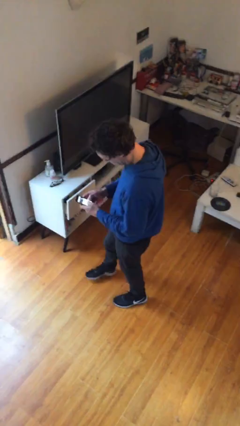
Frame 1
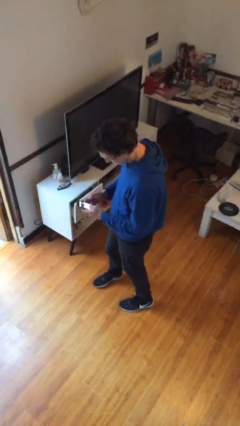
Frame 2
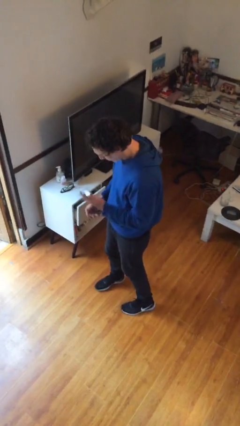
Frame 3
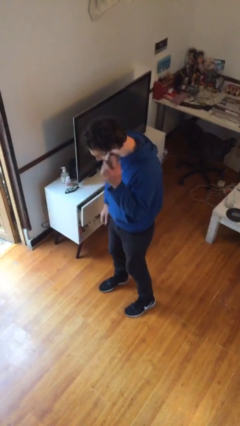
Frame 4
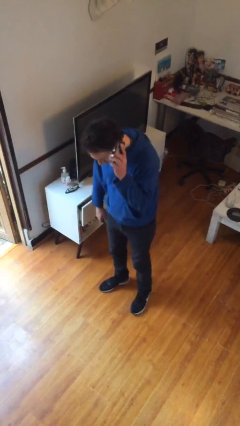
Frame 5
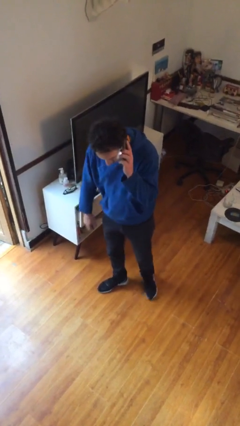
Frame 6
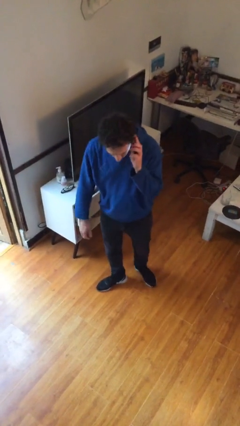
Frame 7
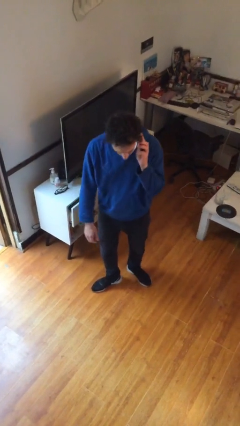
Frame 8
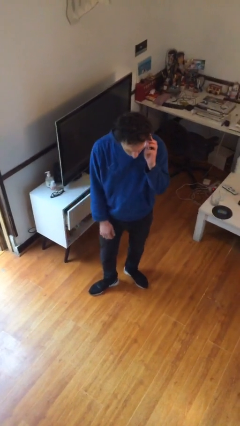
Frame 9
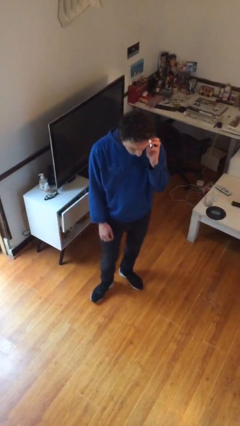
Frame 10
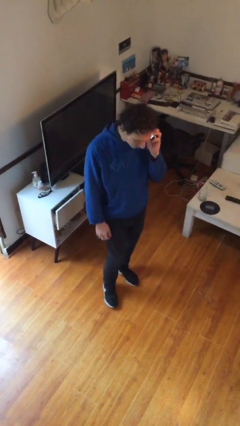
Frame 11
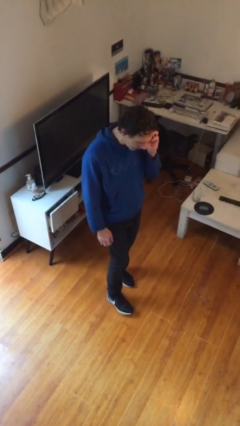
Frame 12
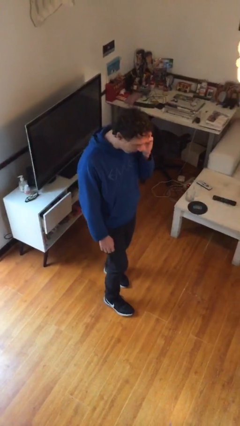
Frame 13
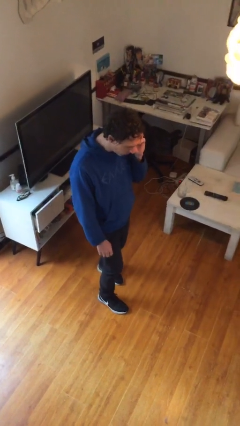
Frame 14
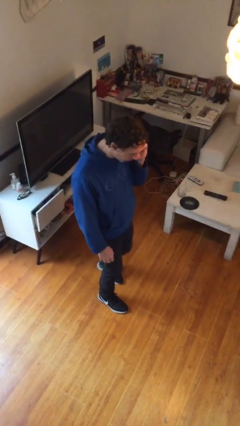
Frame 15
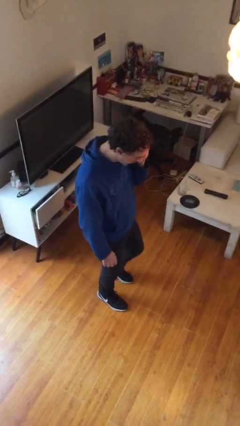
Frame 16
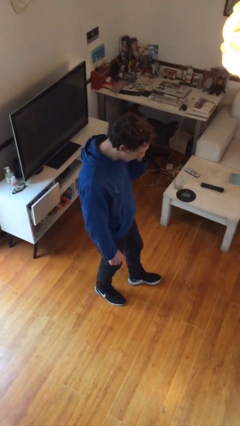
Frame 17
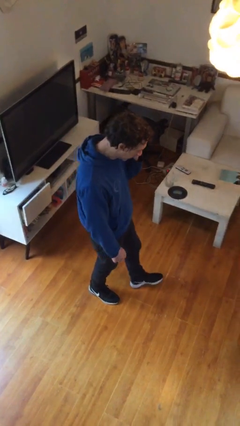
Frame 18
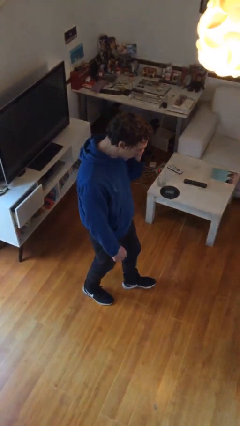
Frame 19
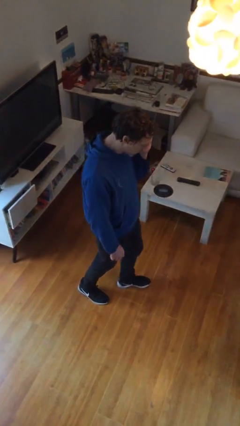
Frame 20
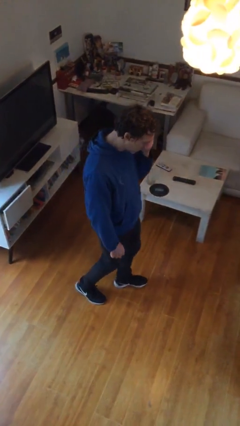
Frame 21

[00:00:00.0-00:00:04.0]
person talks on phone

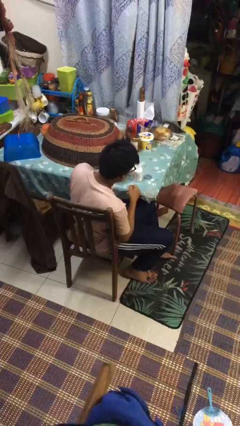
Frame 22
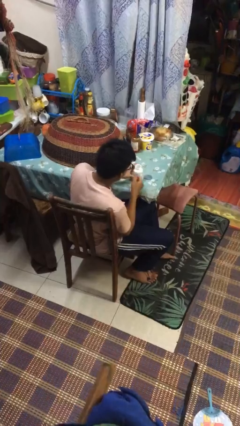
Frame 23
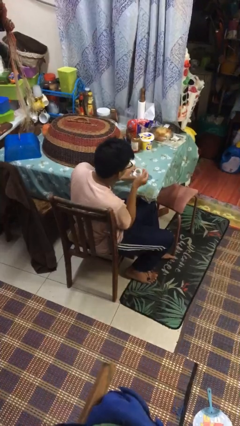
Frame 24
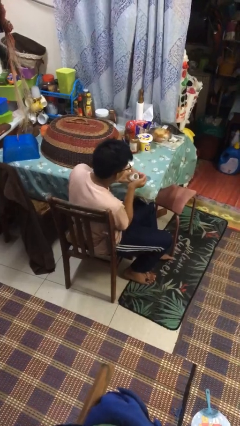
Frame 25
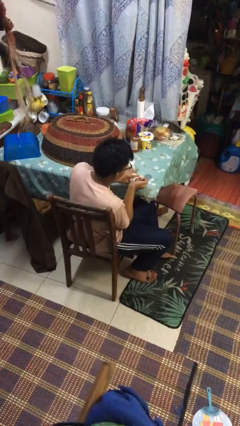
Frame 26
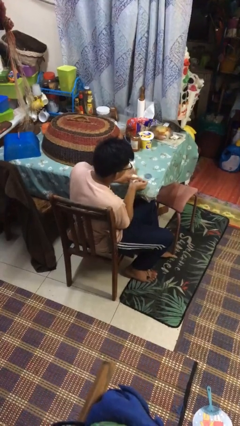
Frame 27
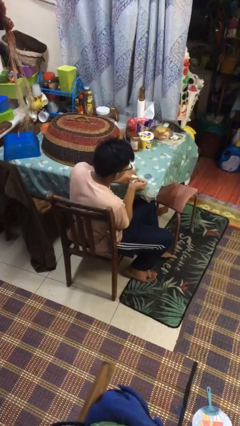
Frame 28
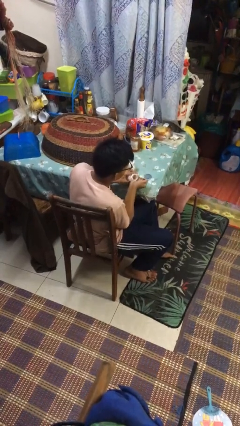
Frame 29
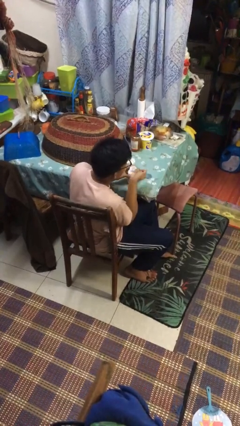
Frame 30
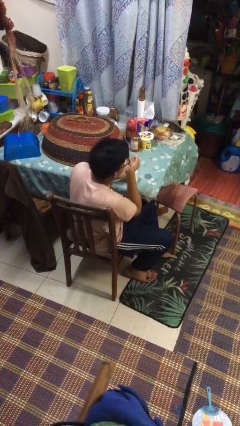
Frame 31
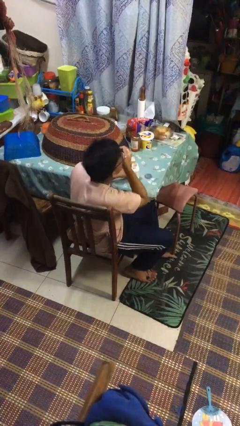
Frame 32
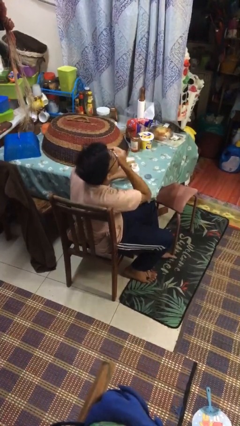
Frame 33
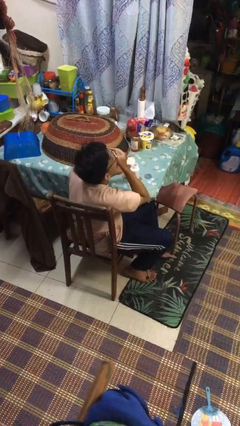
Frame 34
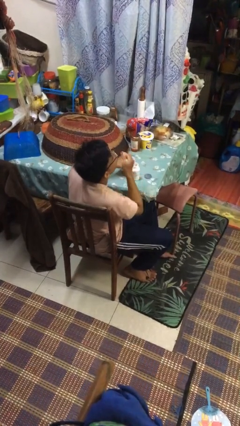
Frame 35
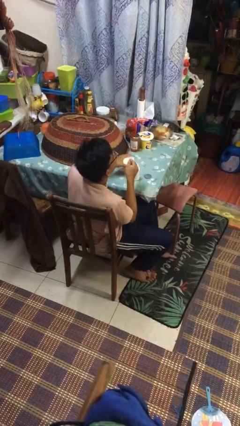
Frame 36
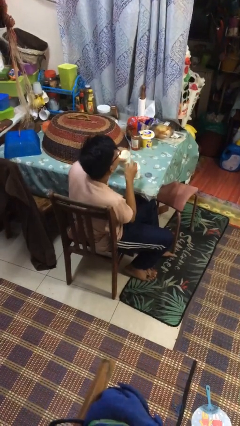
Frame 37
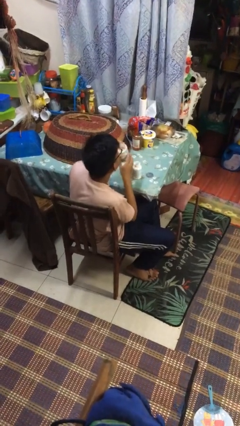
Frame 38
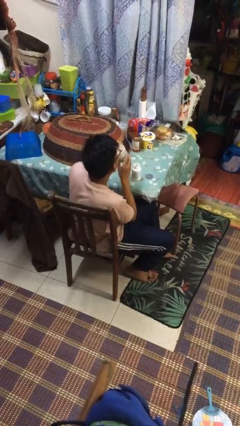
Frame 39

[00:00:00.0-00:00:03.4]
person takes medicine pills

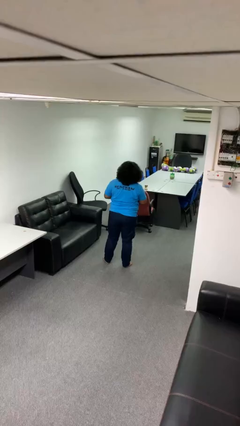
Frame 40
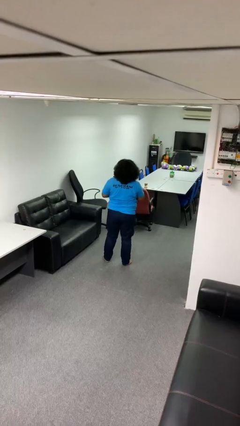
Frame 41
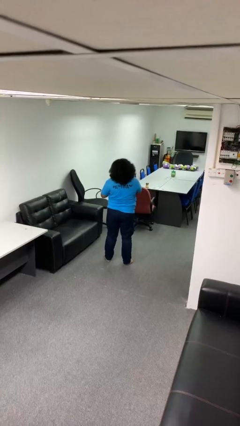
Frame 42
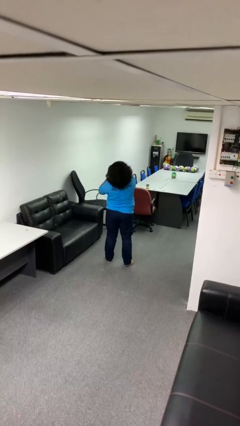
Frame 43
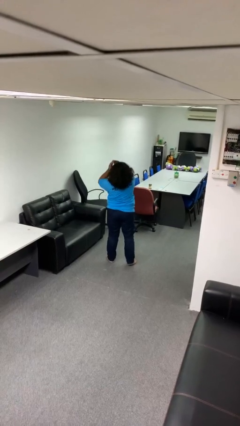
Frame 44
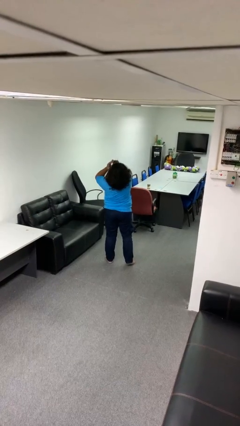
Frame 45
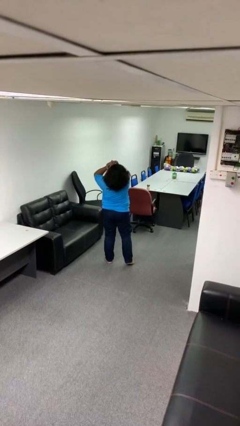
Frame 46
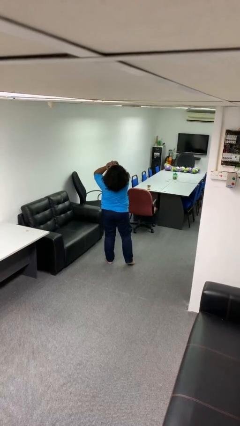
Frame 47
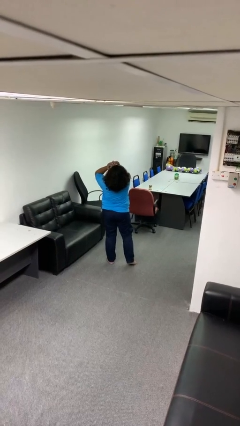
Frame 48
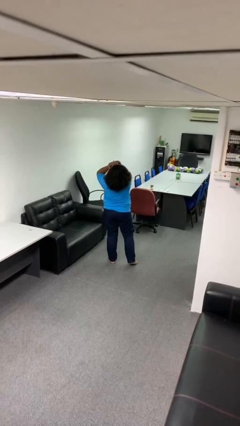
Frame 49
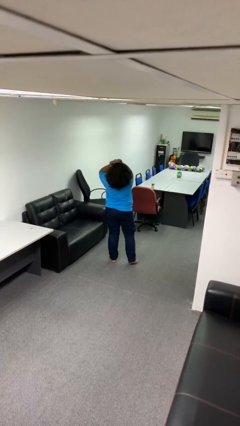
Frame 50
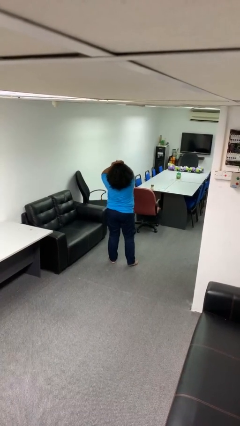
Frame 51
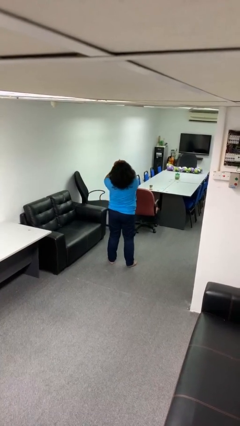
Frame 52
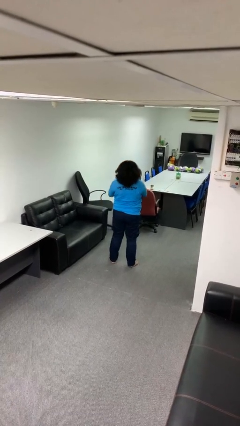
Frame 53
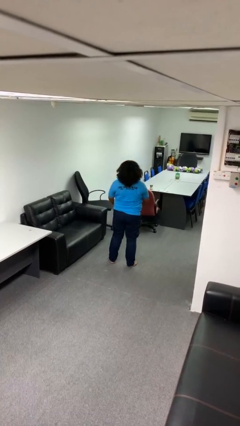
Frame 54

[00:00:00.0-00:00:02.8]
person covers face with hands

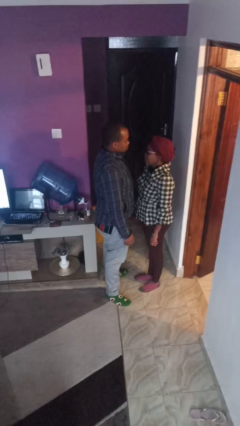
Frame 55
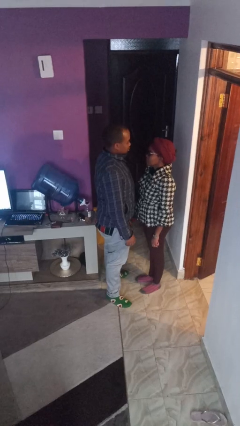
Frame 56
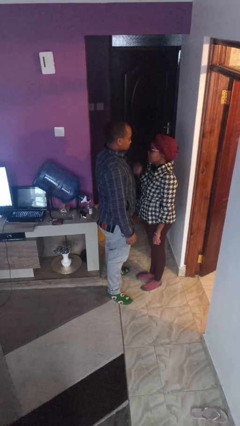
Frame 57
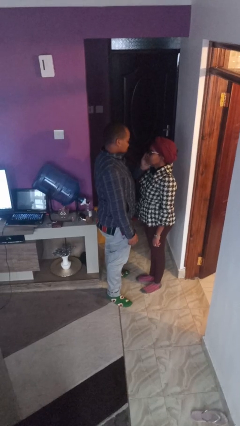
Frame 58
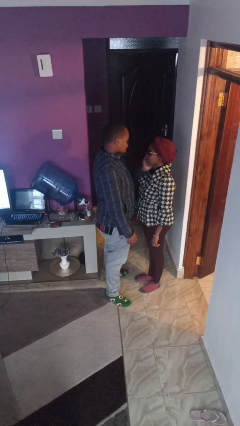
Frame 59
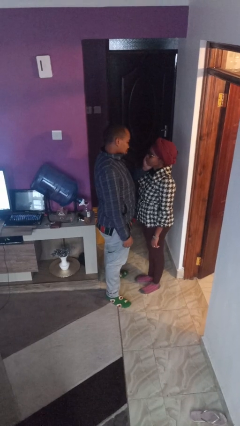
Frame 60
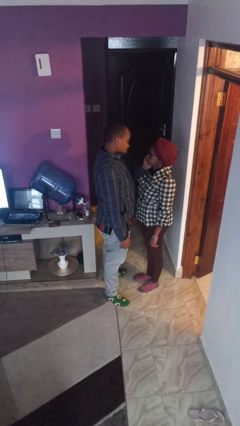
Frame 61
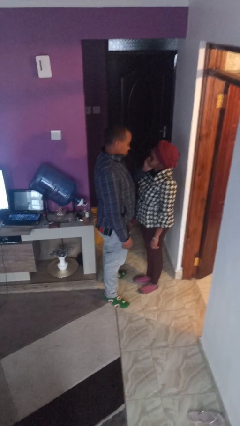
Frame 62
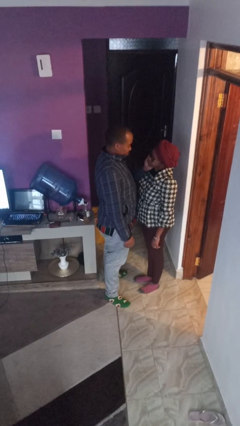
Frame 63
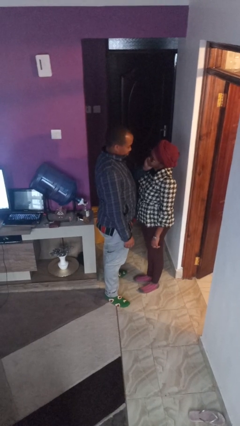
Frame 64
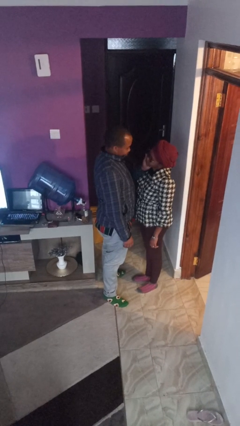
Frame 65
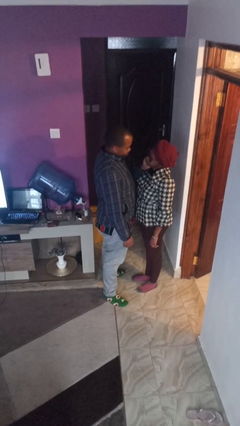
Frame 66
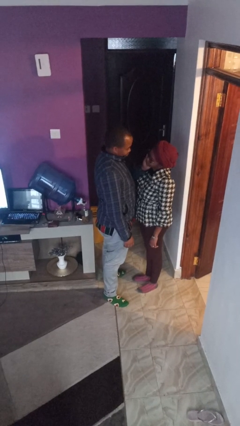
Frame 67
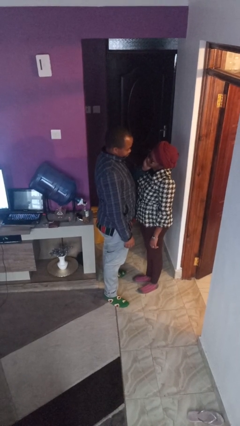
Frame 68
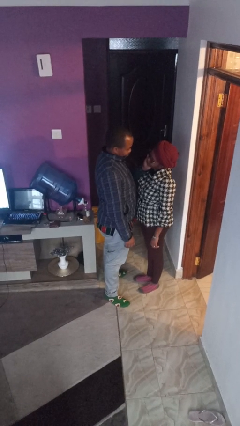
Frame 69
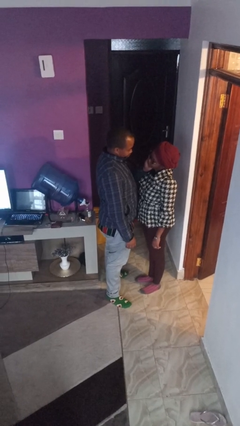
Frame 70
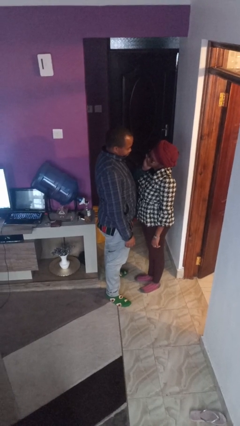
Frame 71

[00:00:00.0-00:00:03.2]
person touches face of person

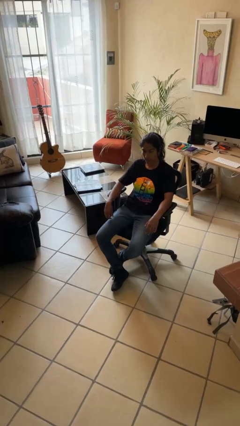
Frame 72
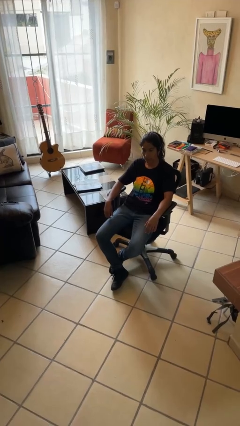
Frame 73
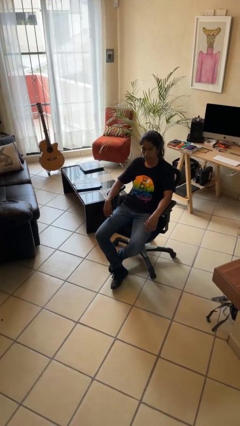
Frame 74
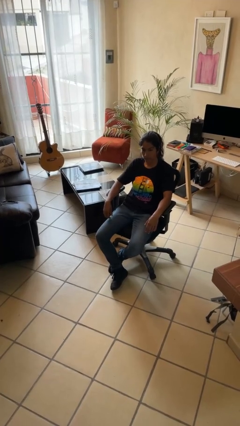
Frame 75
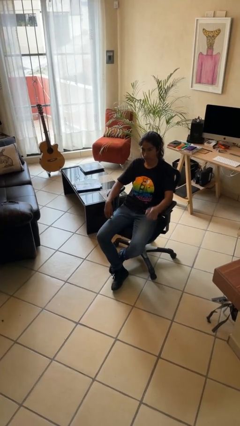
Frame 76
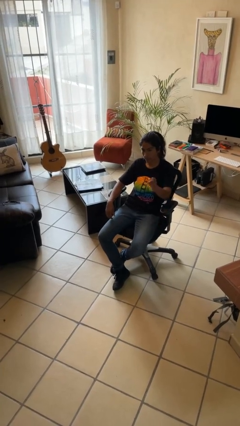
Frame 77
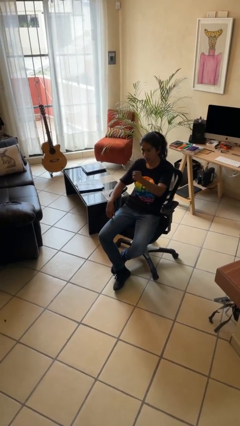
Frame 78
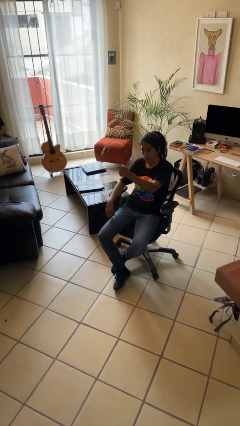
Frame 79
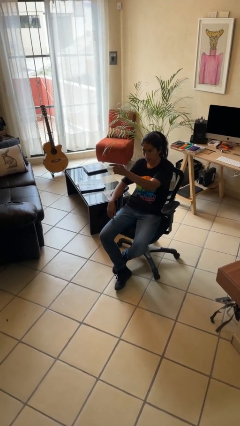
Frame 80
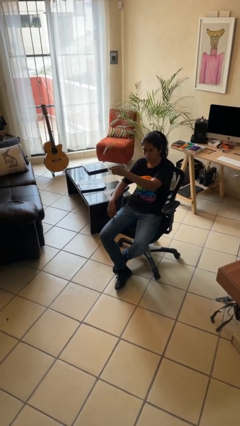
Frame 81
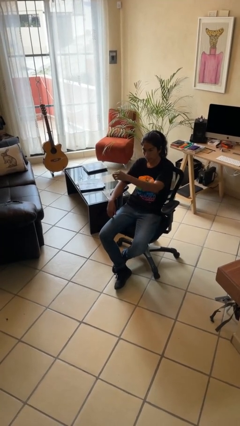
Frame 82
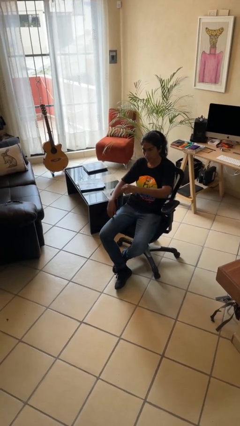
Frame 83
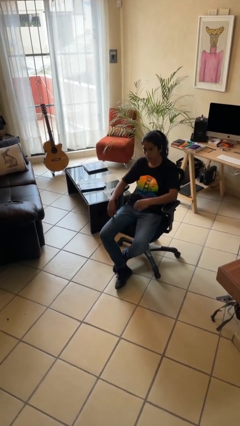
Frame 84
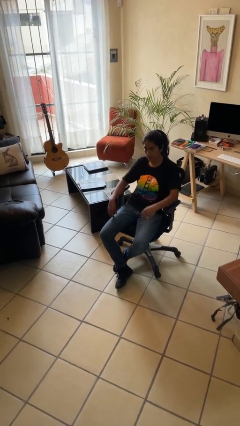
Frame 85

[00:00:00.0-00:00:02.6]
person gestures swipe right

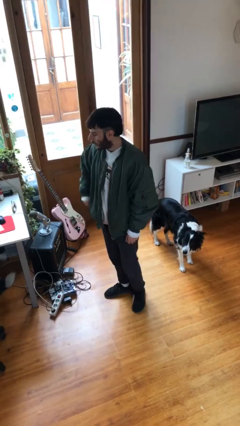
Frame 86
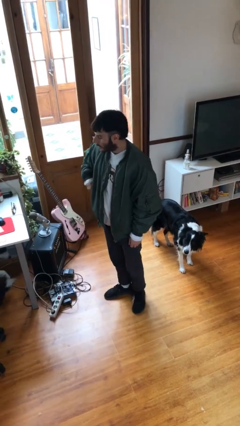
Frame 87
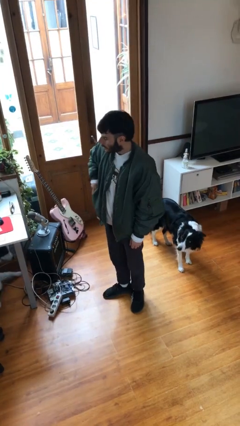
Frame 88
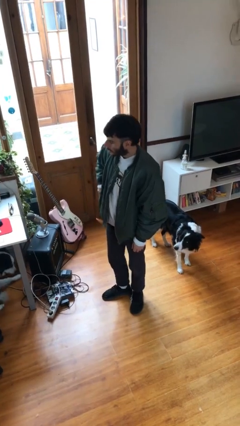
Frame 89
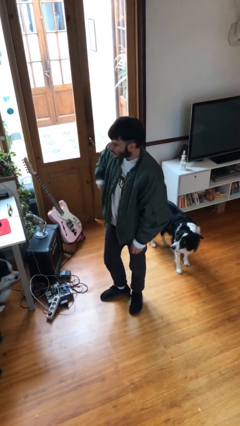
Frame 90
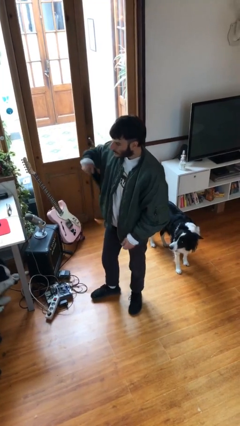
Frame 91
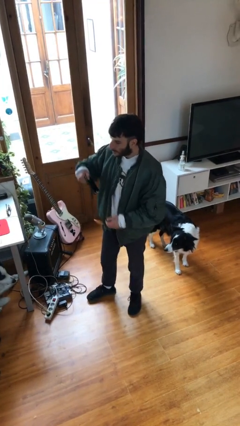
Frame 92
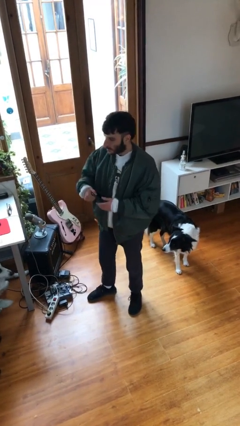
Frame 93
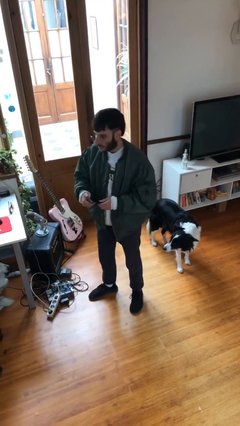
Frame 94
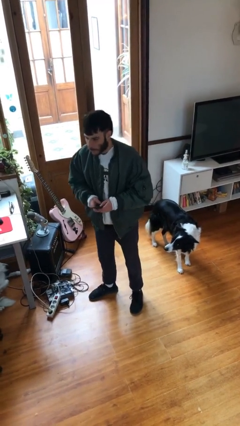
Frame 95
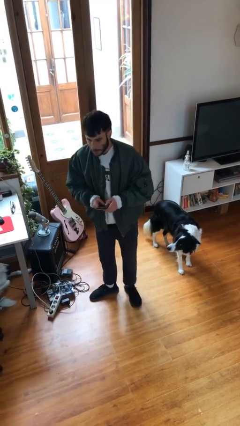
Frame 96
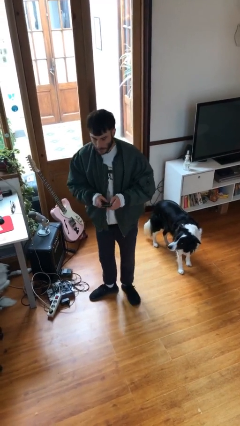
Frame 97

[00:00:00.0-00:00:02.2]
person takes phone from pocket
